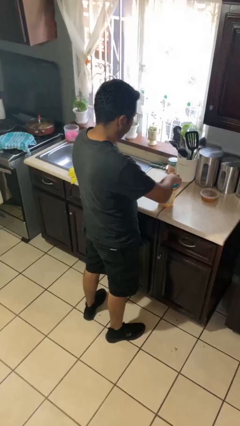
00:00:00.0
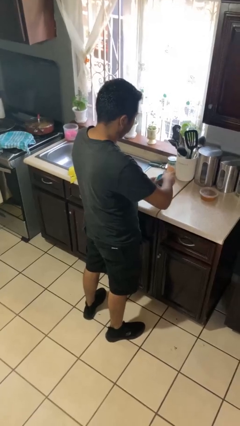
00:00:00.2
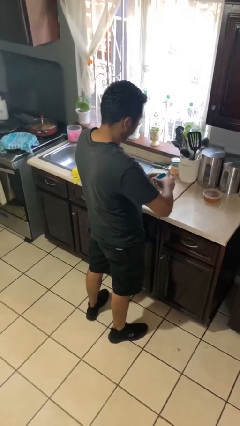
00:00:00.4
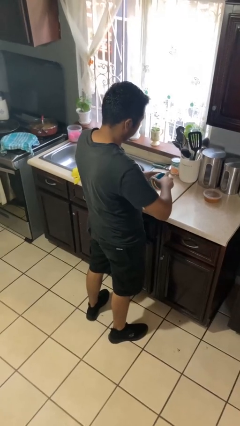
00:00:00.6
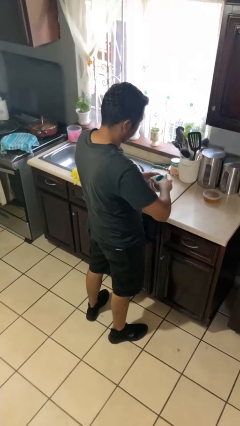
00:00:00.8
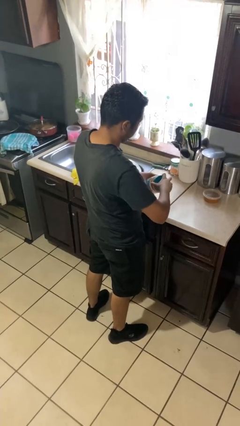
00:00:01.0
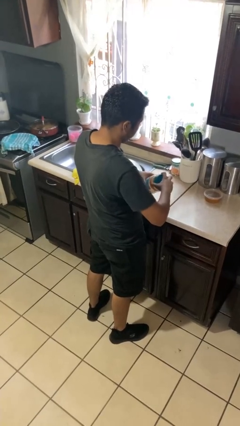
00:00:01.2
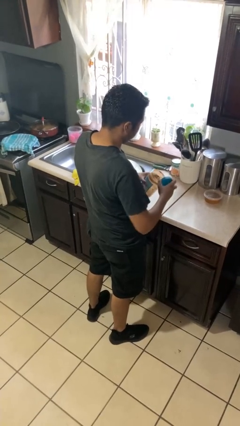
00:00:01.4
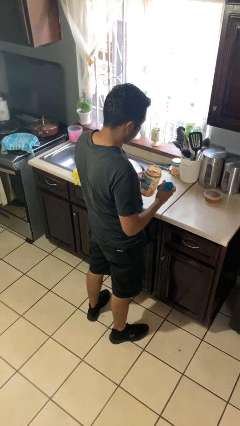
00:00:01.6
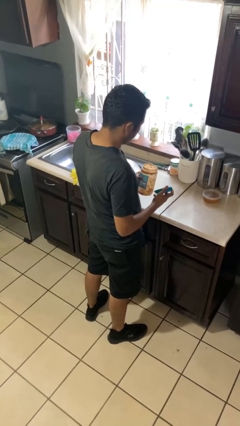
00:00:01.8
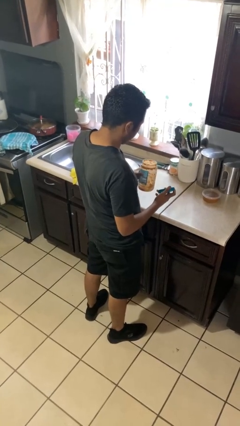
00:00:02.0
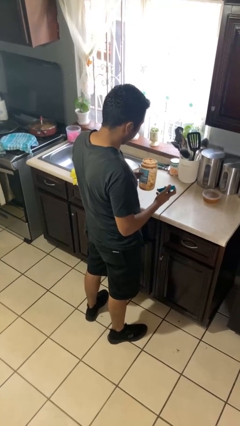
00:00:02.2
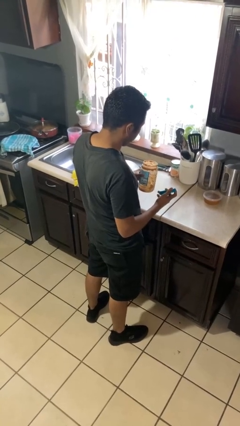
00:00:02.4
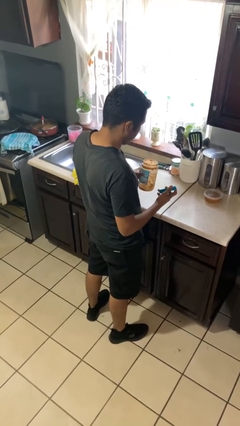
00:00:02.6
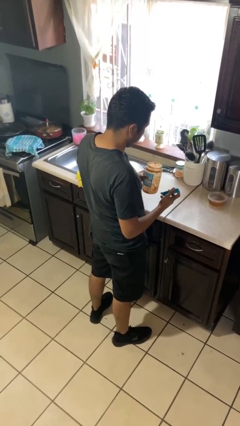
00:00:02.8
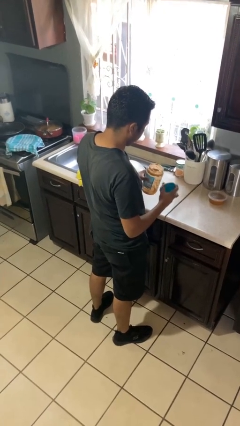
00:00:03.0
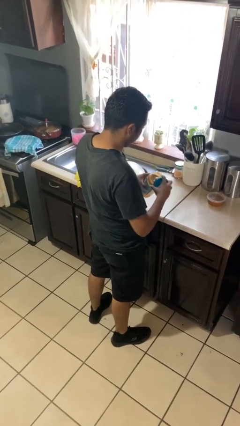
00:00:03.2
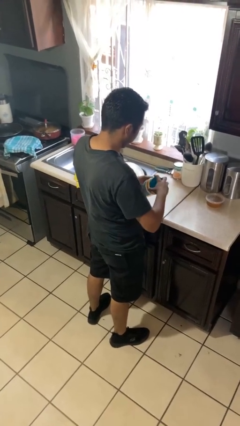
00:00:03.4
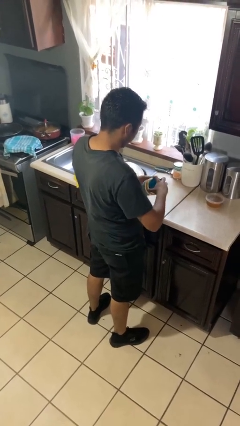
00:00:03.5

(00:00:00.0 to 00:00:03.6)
person opens jar

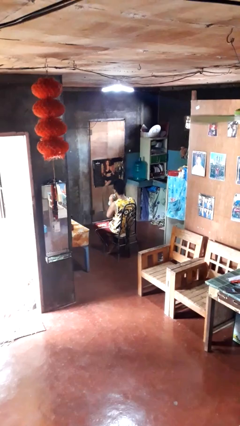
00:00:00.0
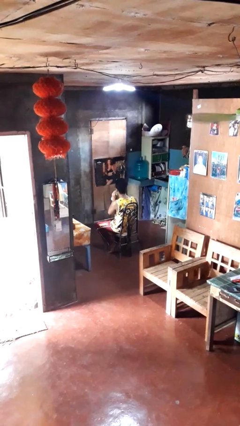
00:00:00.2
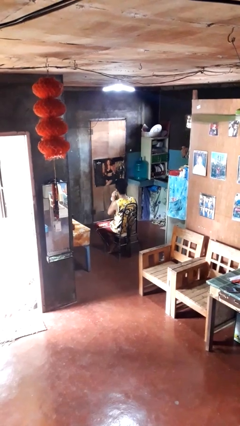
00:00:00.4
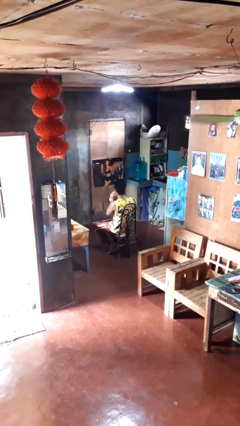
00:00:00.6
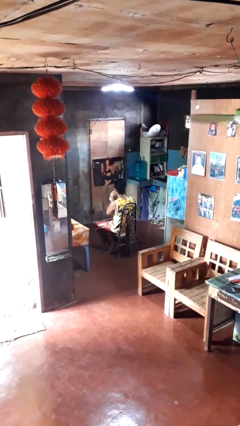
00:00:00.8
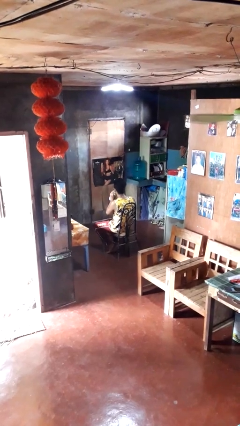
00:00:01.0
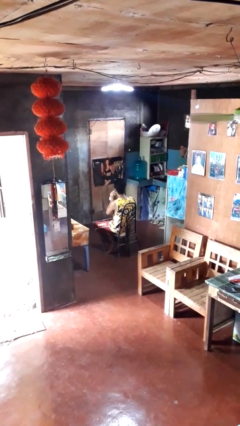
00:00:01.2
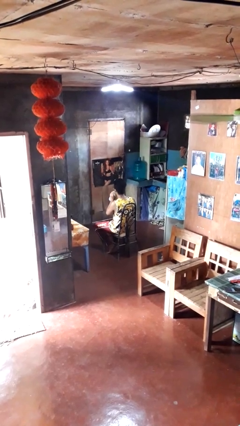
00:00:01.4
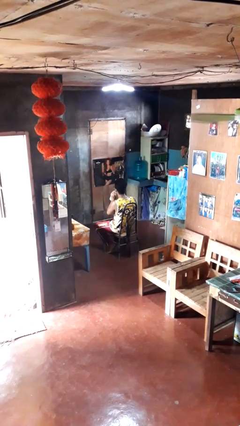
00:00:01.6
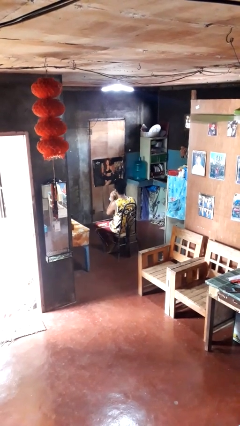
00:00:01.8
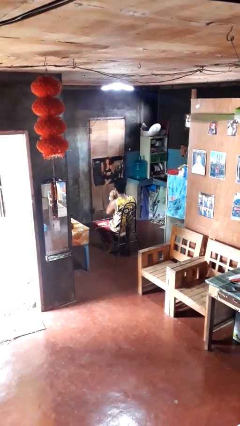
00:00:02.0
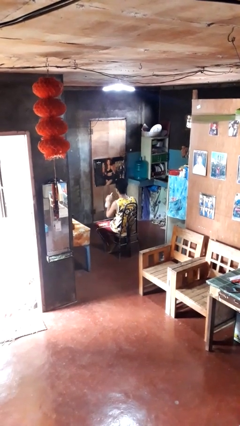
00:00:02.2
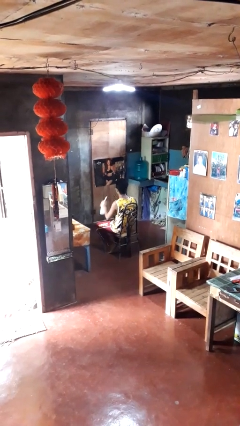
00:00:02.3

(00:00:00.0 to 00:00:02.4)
person drinks from straw

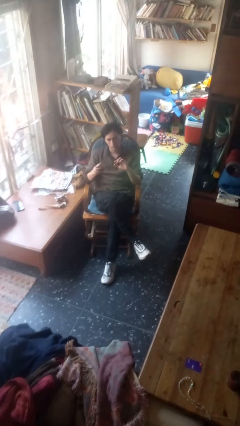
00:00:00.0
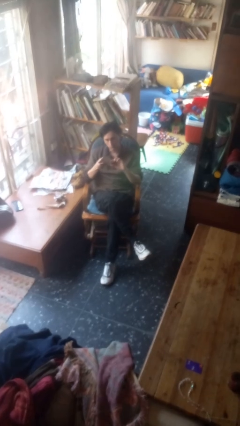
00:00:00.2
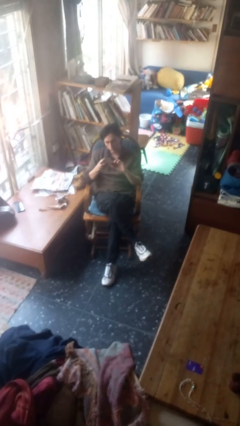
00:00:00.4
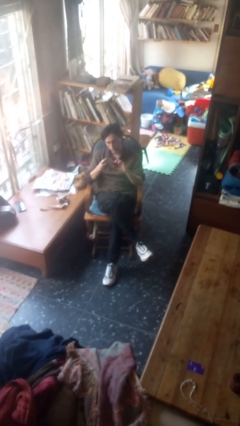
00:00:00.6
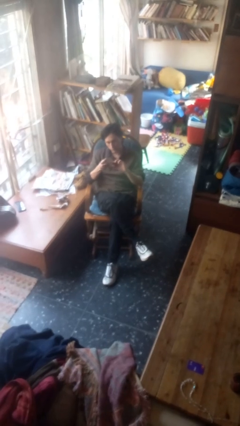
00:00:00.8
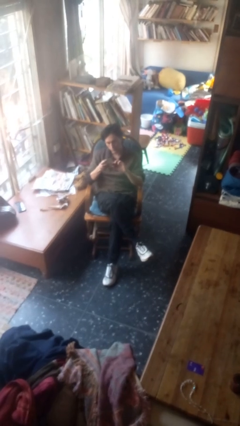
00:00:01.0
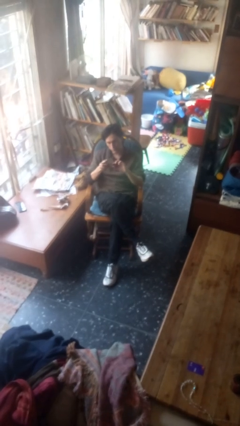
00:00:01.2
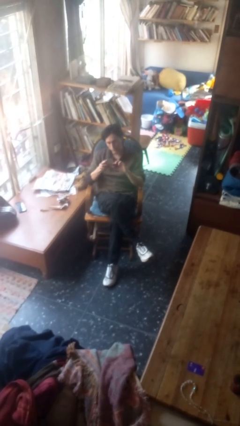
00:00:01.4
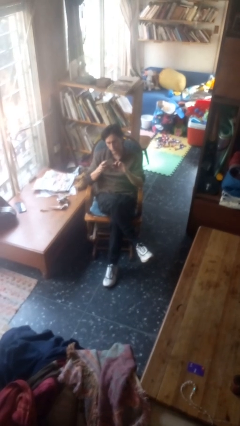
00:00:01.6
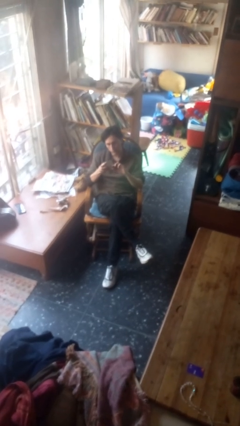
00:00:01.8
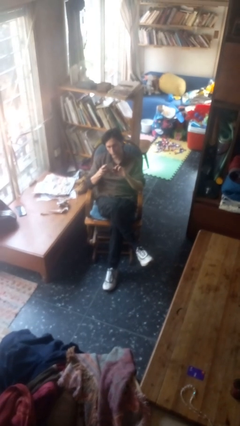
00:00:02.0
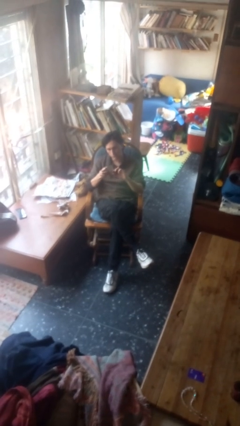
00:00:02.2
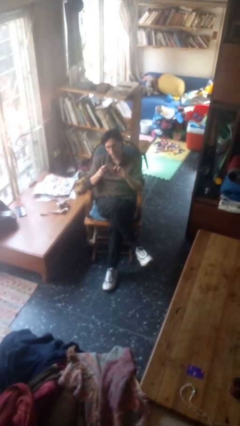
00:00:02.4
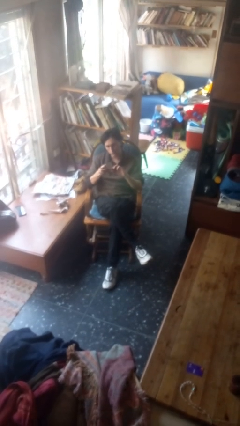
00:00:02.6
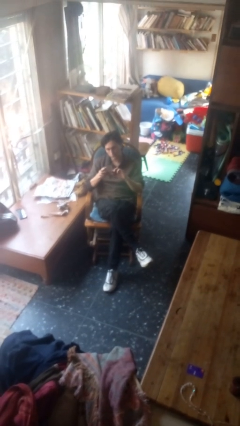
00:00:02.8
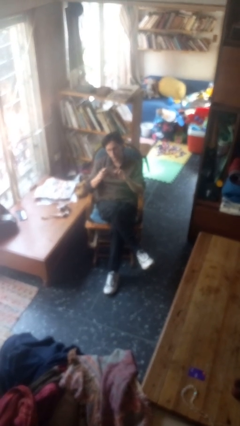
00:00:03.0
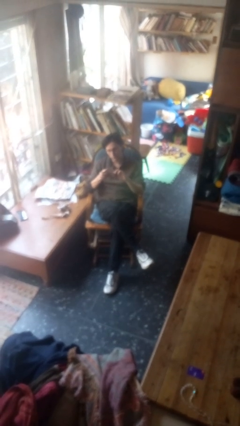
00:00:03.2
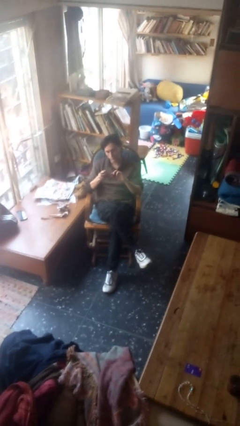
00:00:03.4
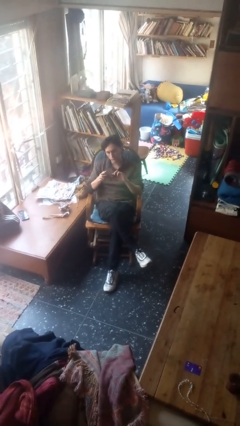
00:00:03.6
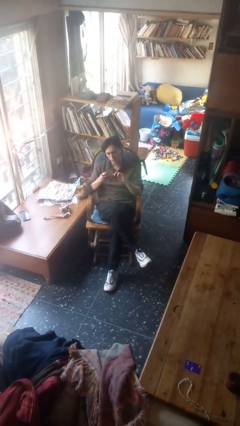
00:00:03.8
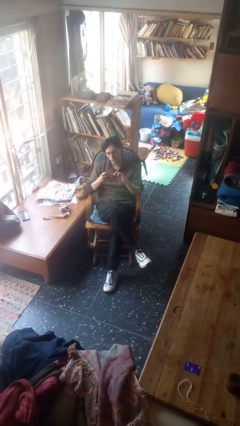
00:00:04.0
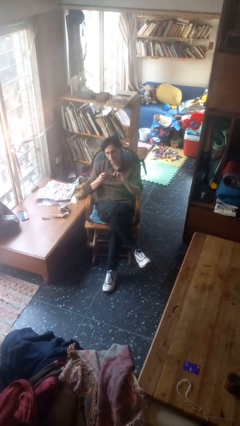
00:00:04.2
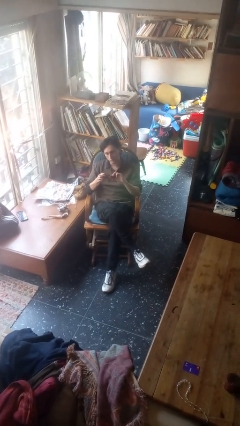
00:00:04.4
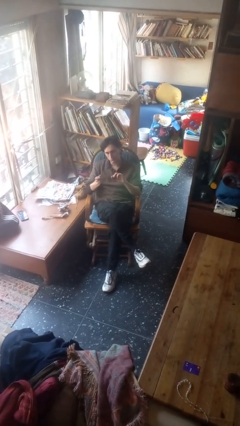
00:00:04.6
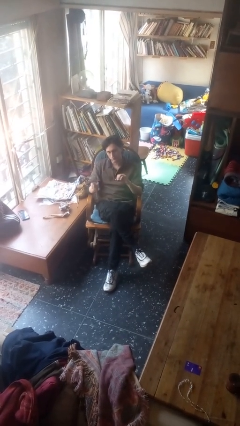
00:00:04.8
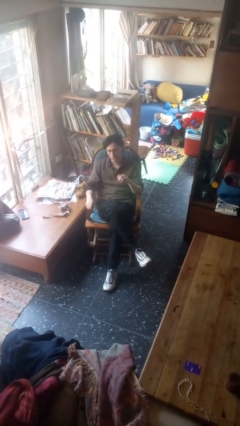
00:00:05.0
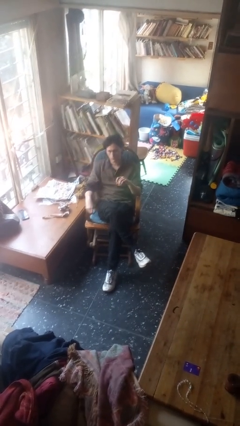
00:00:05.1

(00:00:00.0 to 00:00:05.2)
person clips fingernails

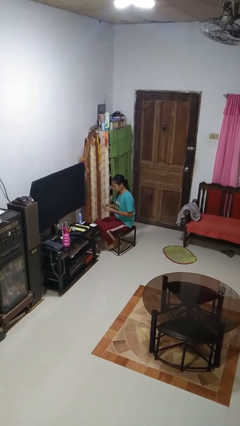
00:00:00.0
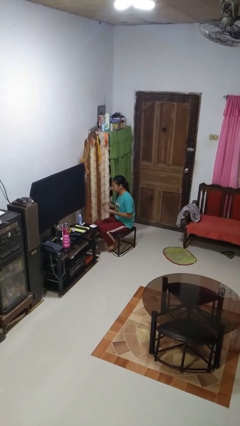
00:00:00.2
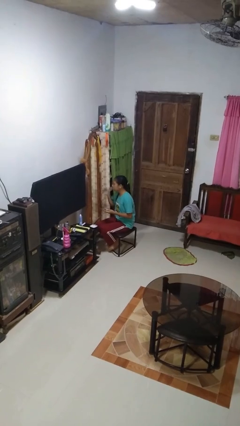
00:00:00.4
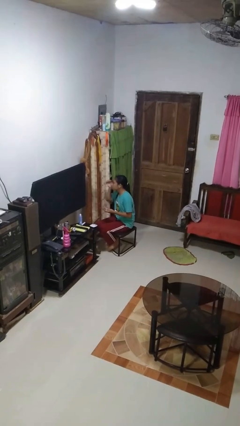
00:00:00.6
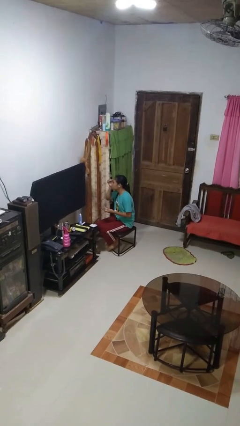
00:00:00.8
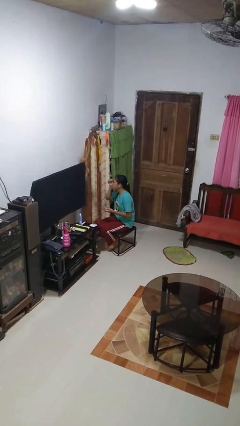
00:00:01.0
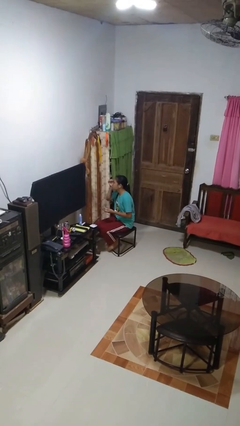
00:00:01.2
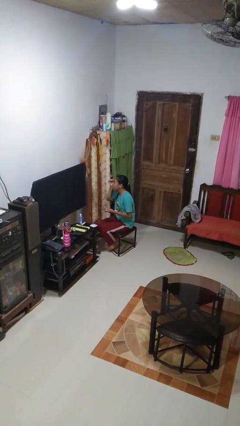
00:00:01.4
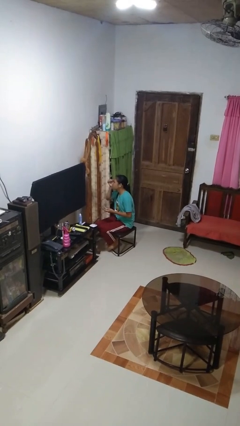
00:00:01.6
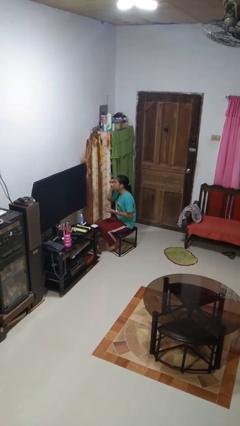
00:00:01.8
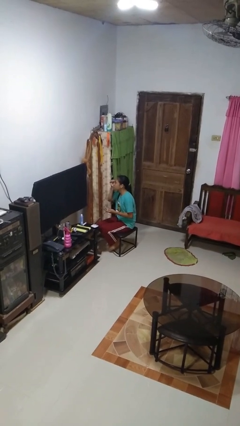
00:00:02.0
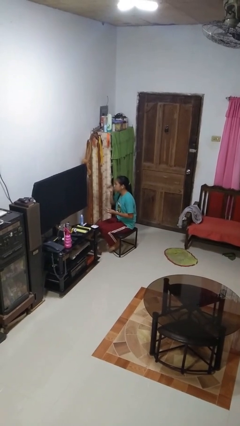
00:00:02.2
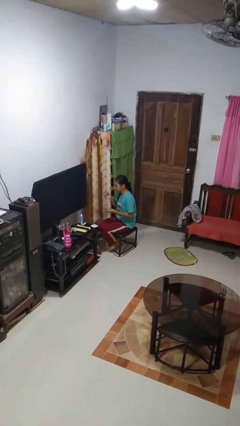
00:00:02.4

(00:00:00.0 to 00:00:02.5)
person applies eye makeup

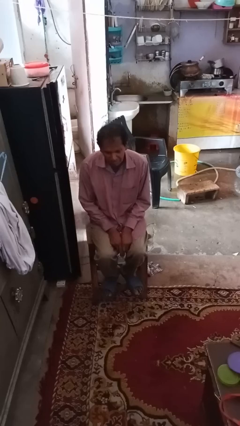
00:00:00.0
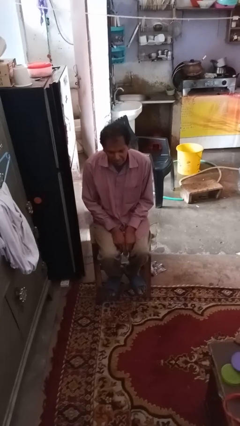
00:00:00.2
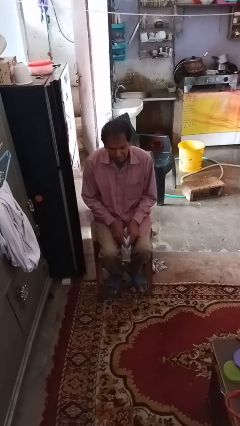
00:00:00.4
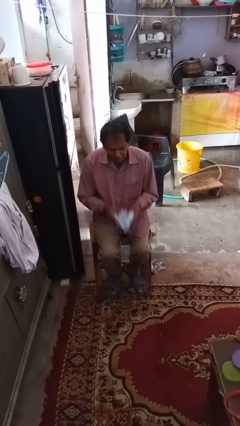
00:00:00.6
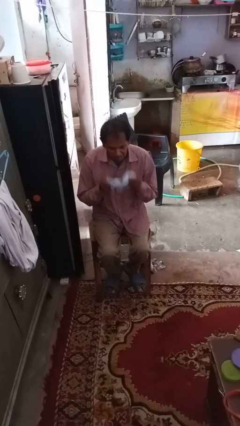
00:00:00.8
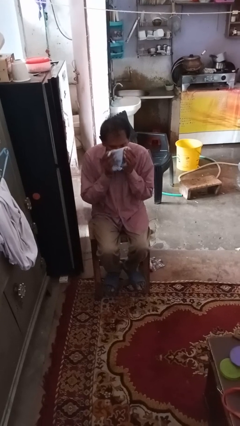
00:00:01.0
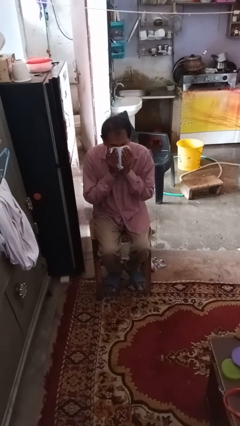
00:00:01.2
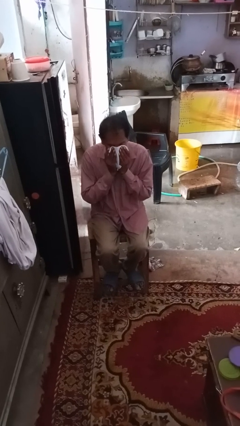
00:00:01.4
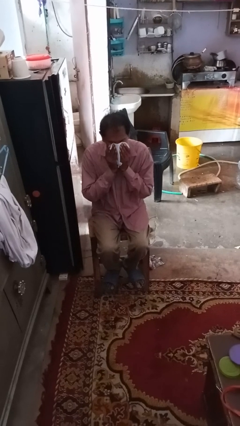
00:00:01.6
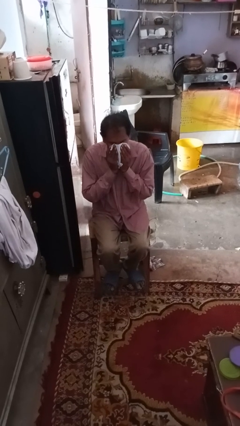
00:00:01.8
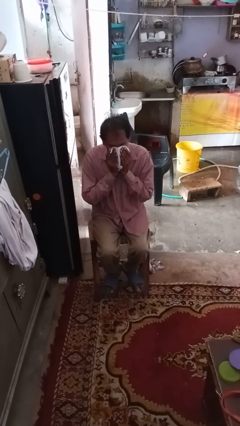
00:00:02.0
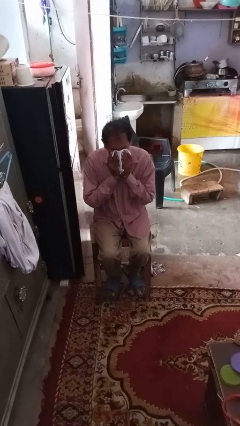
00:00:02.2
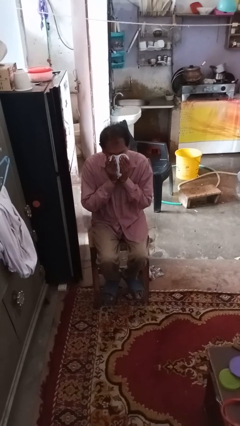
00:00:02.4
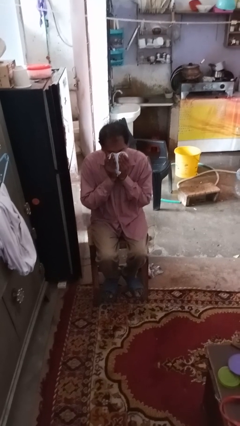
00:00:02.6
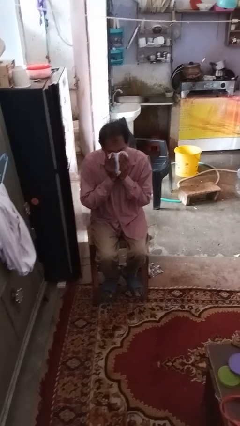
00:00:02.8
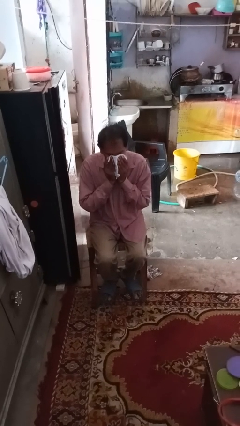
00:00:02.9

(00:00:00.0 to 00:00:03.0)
person blows nose

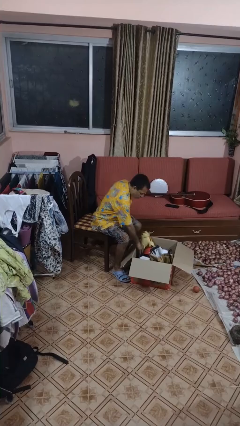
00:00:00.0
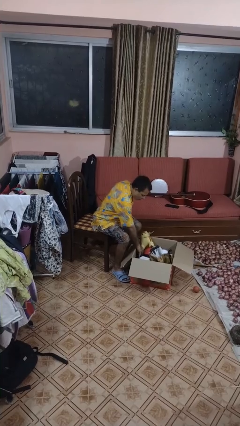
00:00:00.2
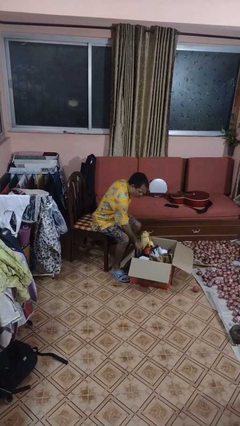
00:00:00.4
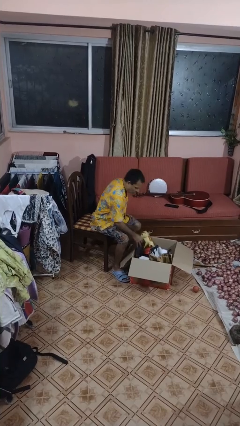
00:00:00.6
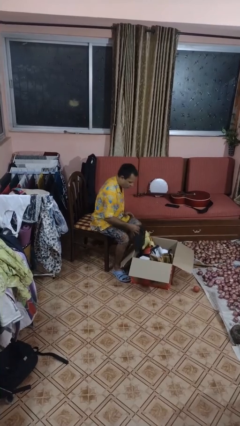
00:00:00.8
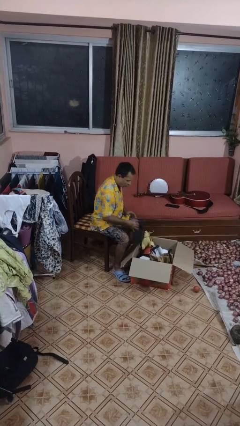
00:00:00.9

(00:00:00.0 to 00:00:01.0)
person takes object from box
